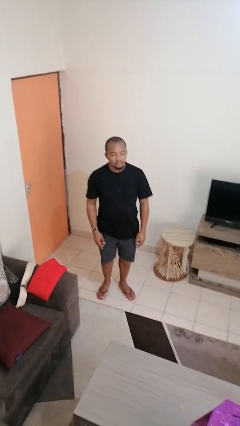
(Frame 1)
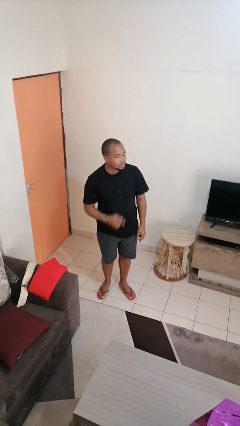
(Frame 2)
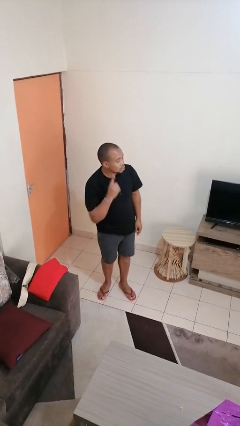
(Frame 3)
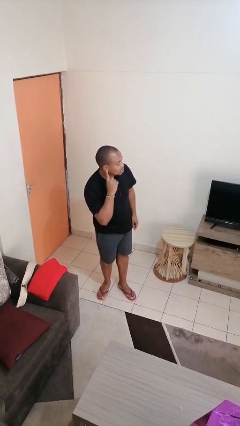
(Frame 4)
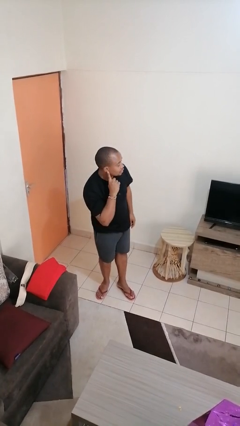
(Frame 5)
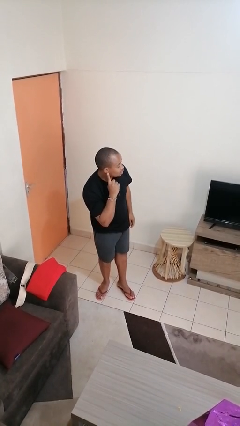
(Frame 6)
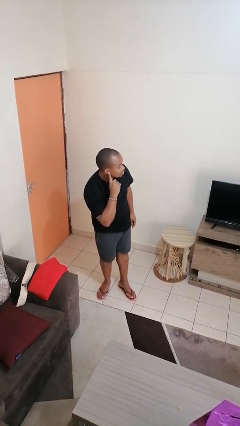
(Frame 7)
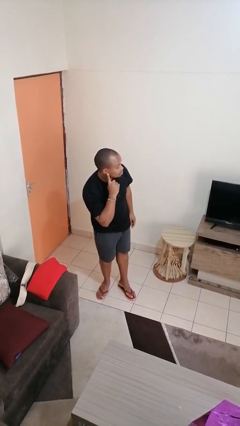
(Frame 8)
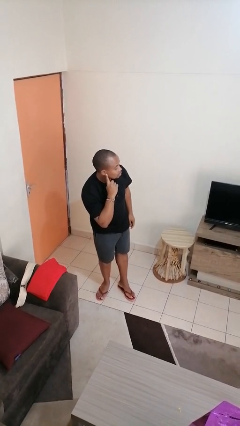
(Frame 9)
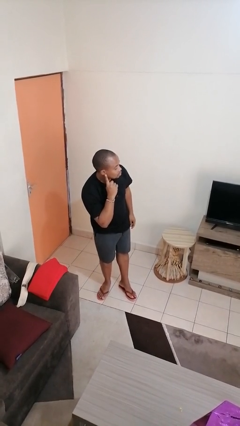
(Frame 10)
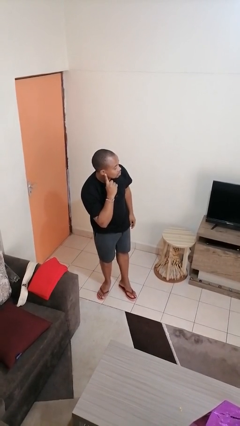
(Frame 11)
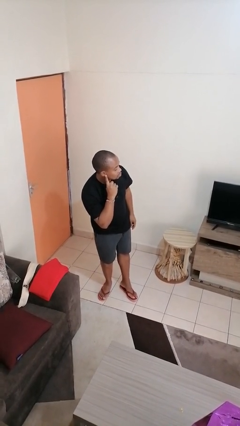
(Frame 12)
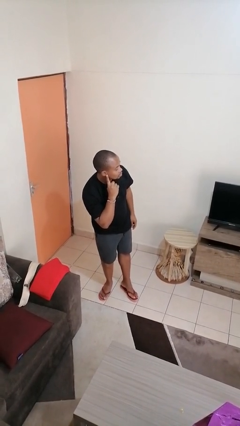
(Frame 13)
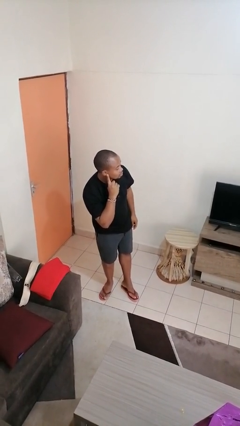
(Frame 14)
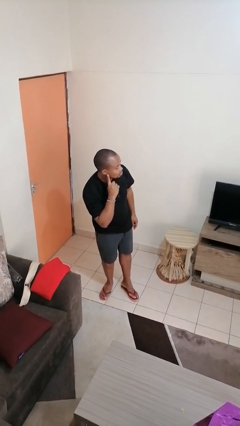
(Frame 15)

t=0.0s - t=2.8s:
person gestures listen closely

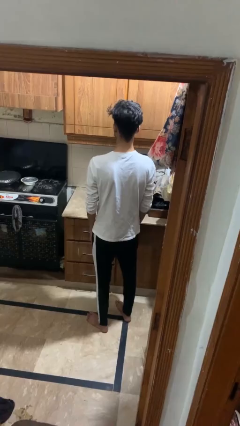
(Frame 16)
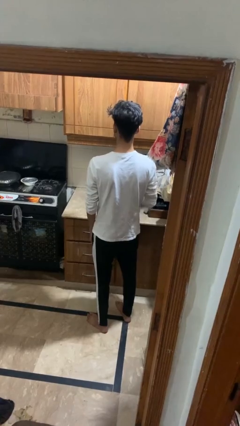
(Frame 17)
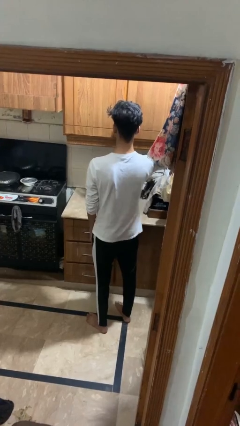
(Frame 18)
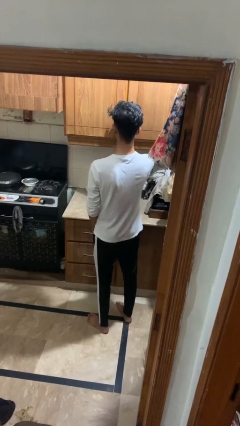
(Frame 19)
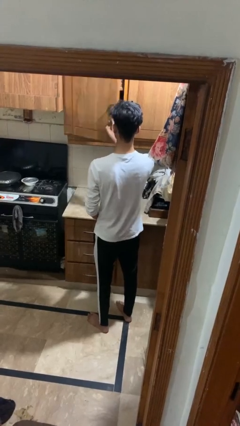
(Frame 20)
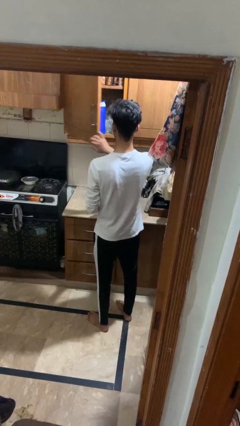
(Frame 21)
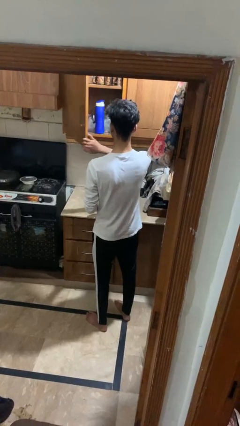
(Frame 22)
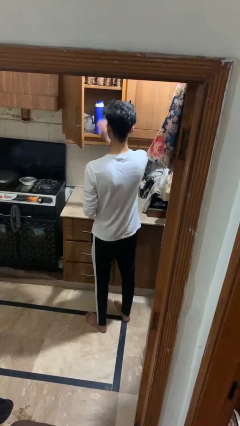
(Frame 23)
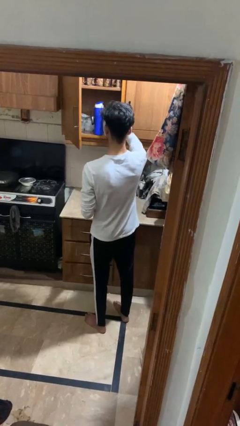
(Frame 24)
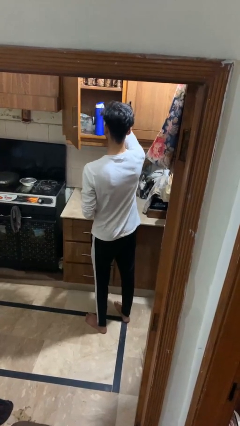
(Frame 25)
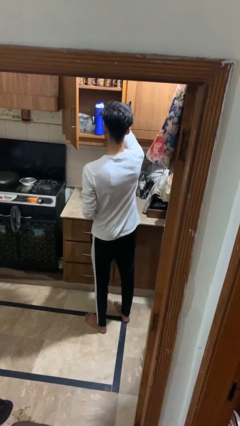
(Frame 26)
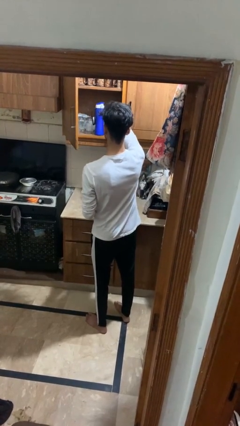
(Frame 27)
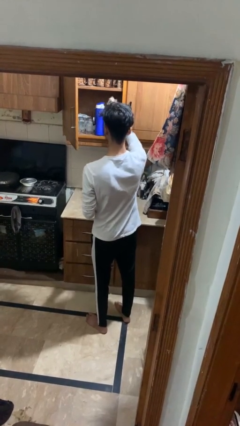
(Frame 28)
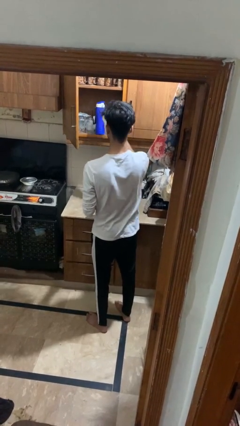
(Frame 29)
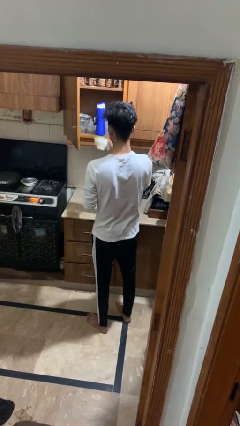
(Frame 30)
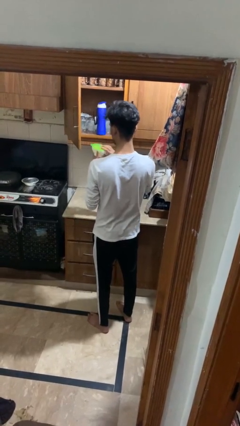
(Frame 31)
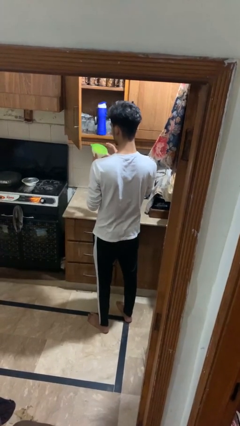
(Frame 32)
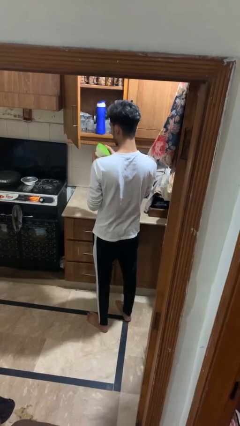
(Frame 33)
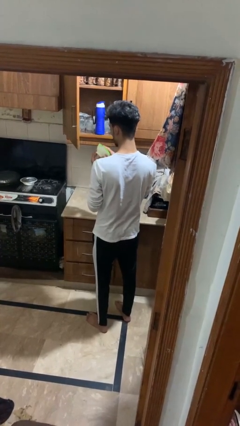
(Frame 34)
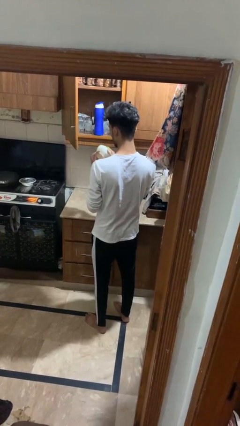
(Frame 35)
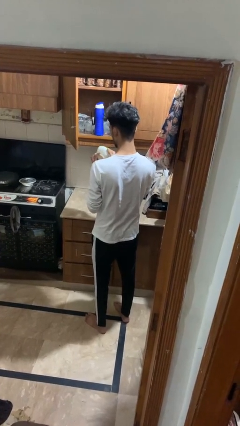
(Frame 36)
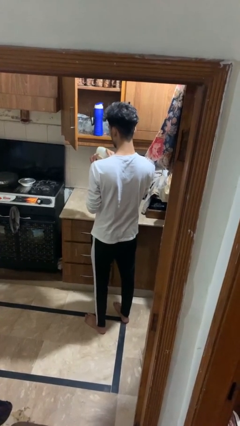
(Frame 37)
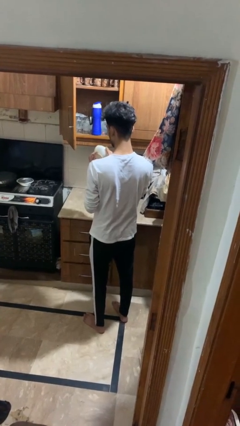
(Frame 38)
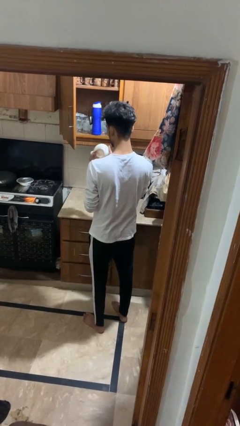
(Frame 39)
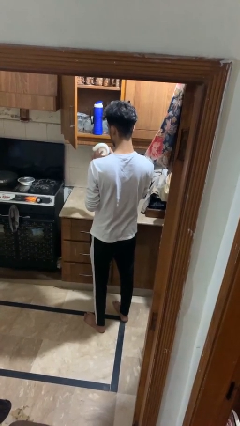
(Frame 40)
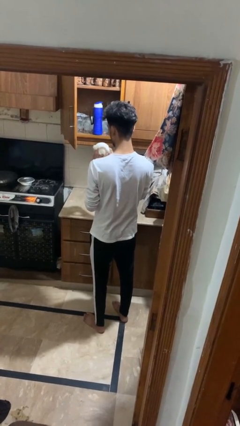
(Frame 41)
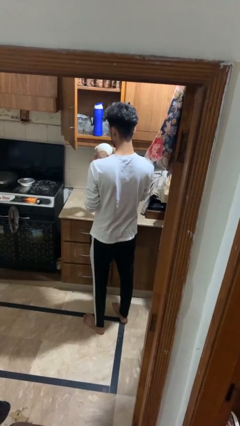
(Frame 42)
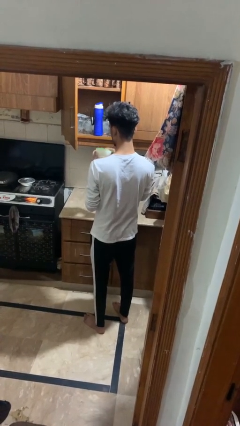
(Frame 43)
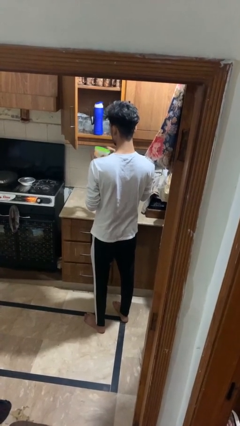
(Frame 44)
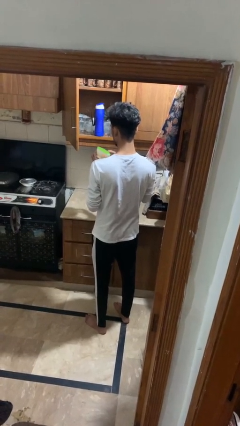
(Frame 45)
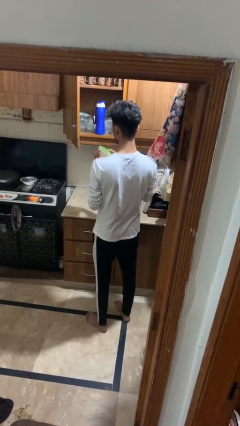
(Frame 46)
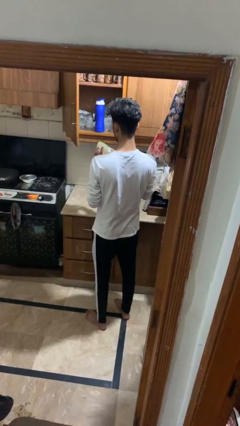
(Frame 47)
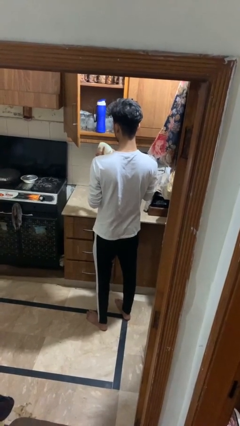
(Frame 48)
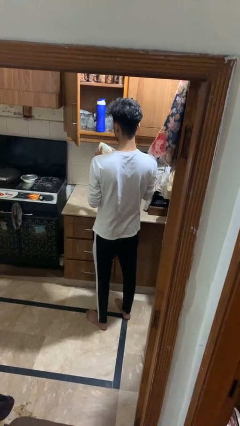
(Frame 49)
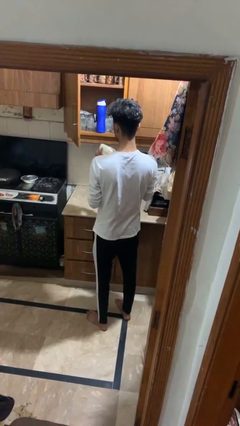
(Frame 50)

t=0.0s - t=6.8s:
person puts object in cabinet

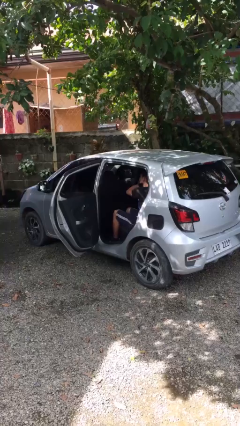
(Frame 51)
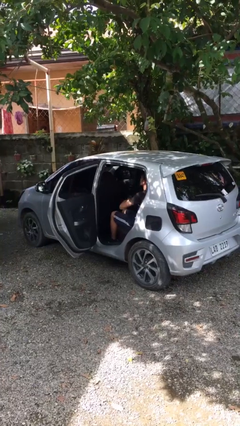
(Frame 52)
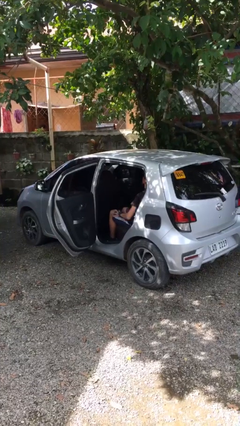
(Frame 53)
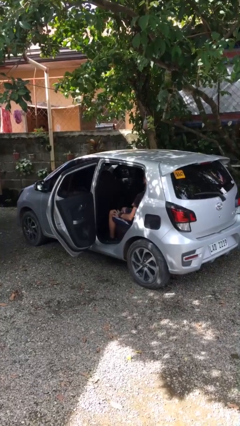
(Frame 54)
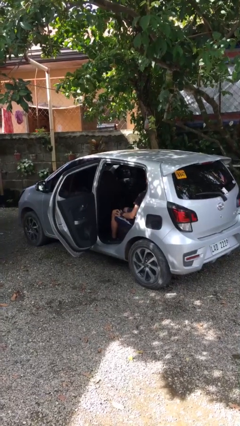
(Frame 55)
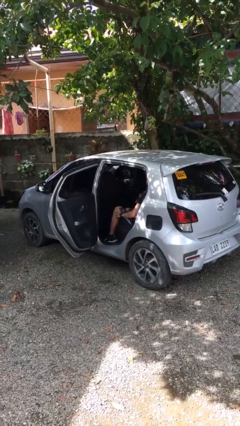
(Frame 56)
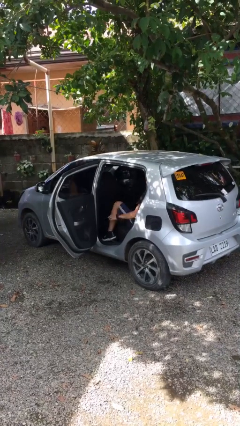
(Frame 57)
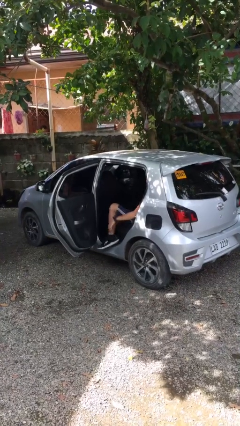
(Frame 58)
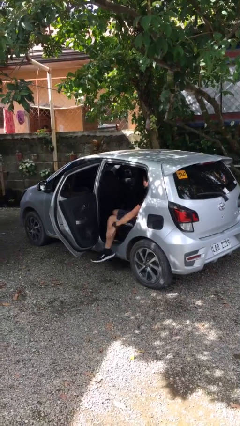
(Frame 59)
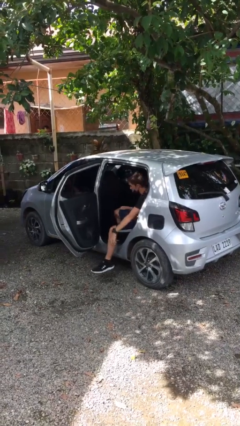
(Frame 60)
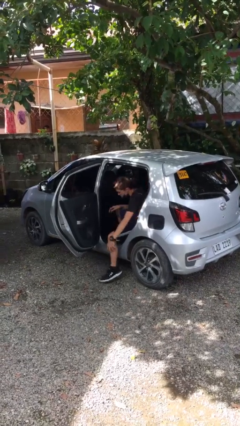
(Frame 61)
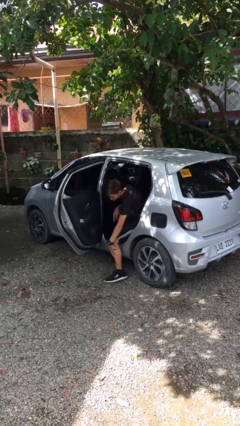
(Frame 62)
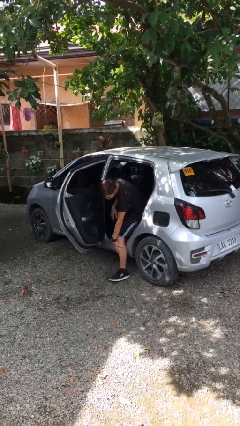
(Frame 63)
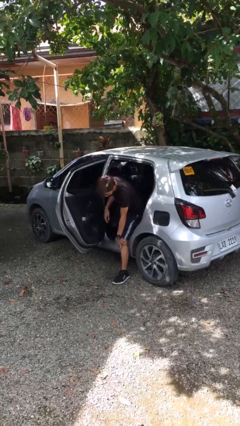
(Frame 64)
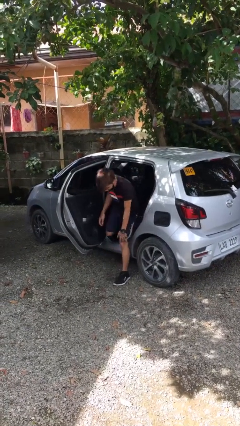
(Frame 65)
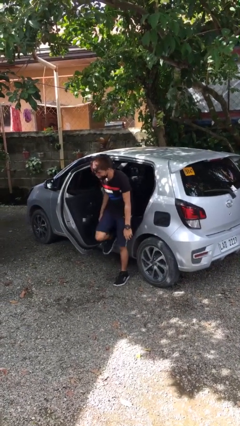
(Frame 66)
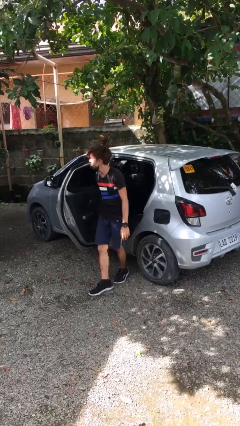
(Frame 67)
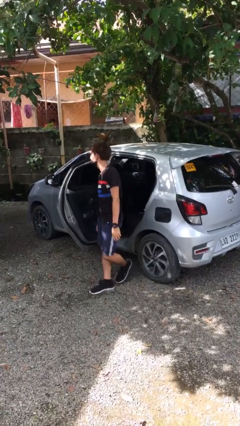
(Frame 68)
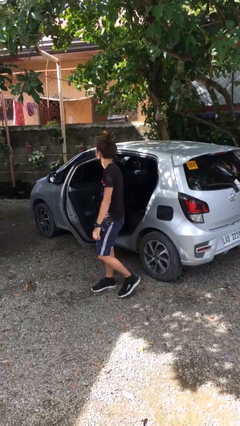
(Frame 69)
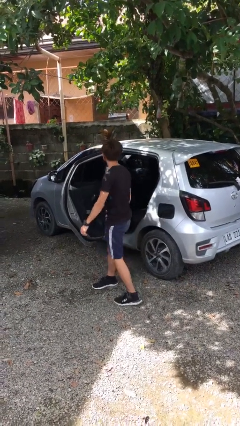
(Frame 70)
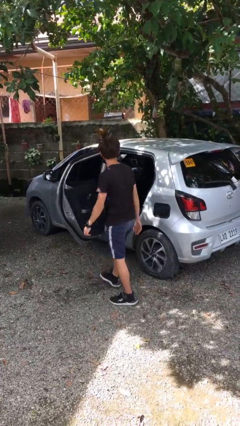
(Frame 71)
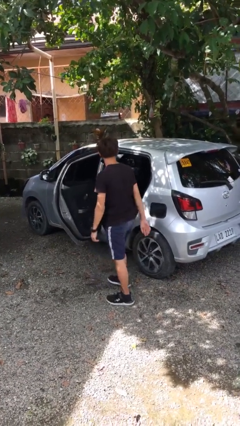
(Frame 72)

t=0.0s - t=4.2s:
person exits car

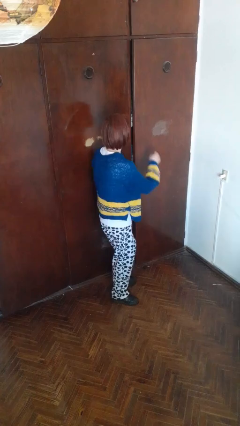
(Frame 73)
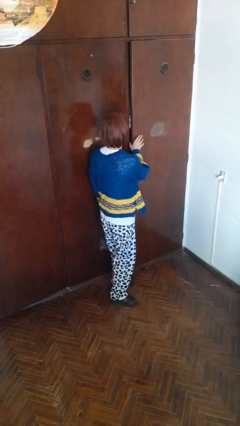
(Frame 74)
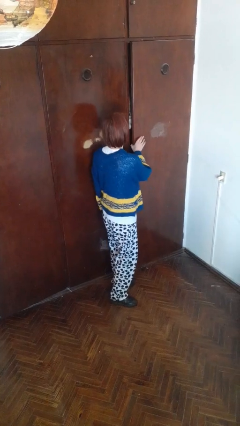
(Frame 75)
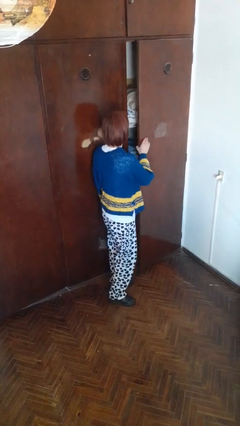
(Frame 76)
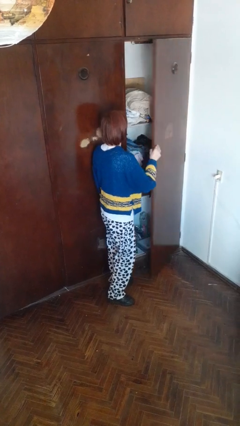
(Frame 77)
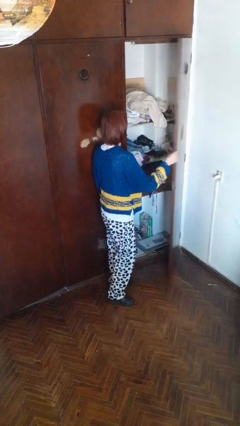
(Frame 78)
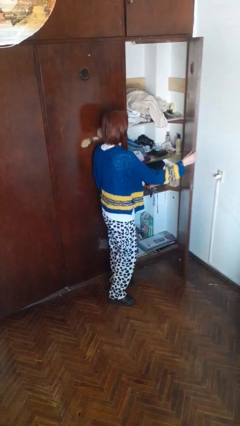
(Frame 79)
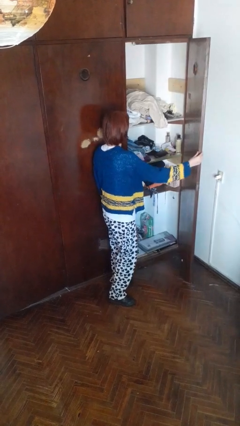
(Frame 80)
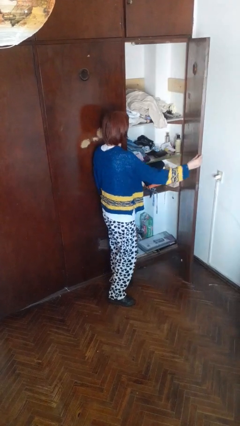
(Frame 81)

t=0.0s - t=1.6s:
person opens closet door

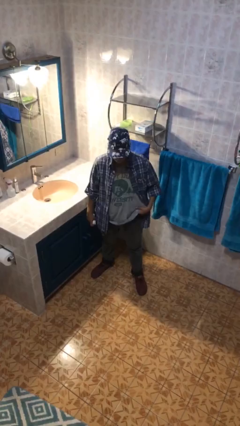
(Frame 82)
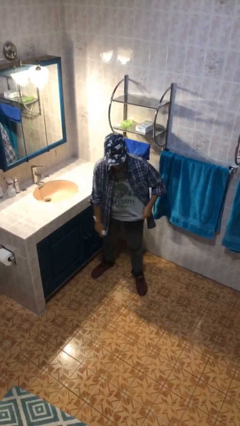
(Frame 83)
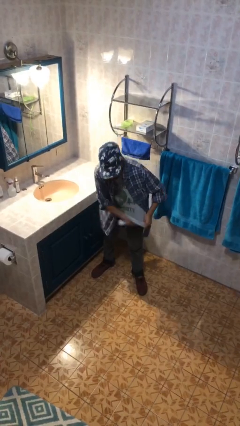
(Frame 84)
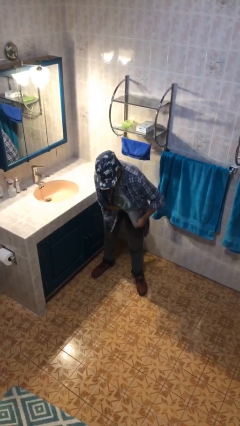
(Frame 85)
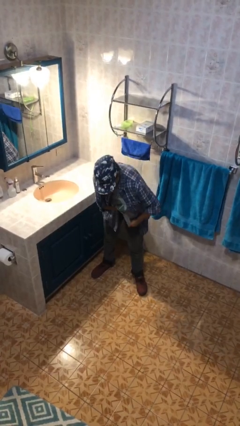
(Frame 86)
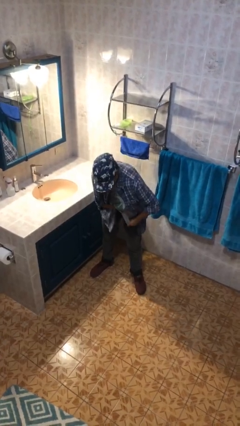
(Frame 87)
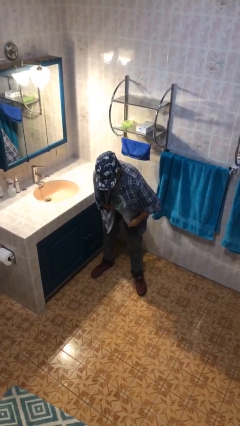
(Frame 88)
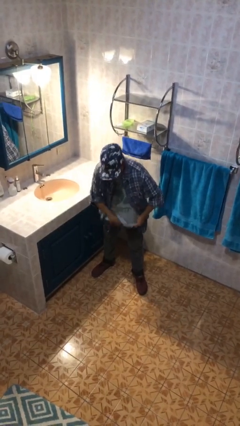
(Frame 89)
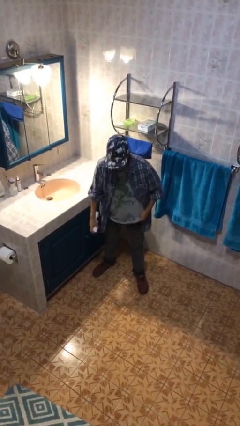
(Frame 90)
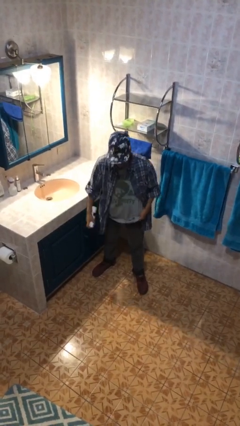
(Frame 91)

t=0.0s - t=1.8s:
person applies deodorant

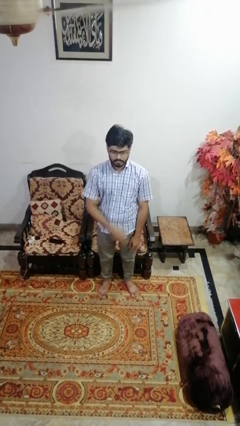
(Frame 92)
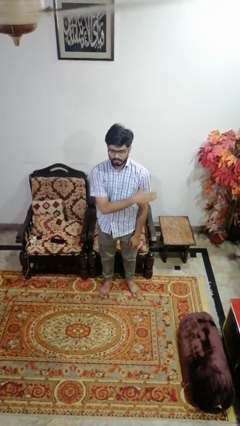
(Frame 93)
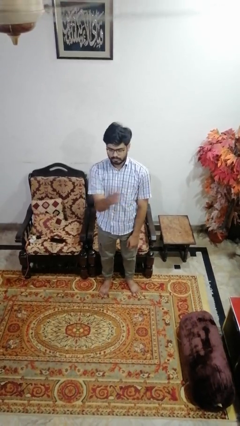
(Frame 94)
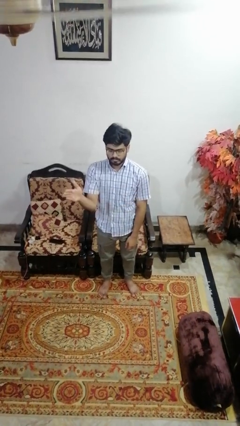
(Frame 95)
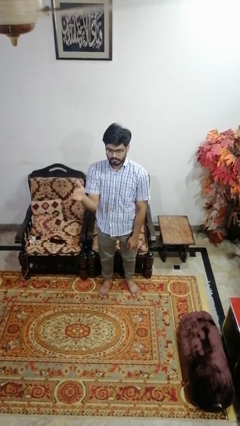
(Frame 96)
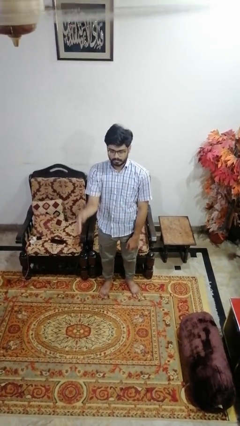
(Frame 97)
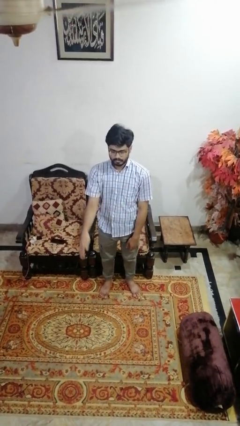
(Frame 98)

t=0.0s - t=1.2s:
person gestures swipe right
